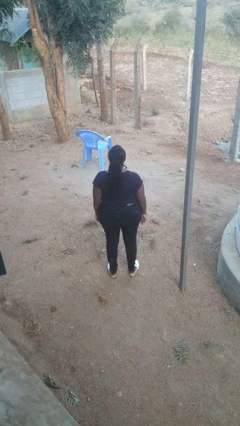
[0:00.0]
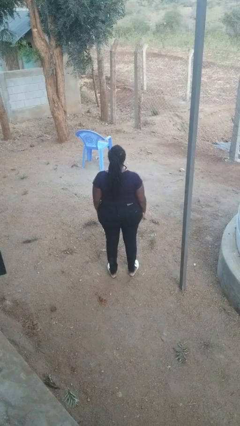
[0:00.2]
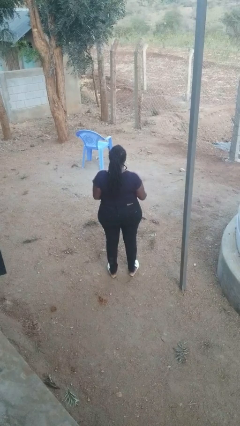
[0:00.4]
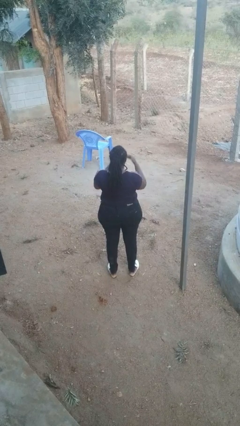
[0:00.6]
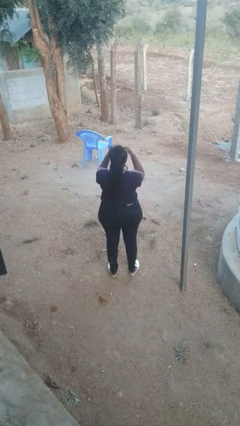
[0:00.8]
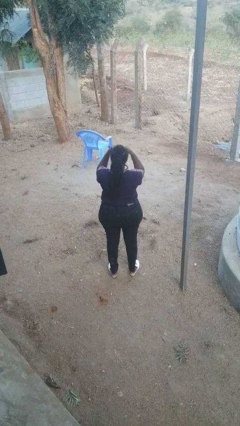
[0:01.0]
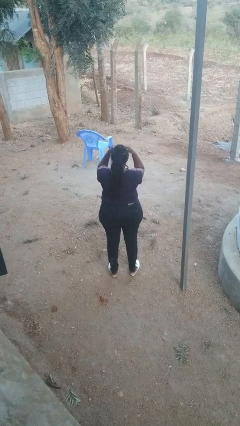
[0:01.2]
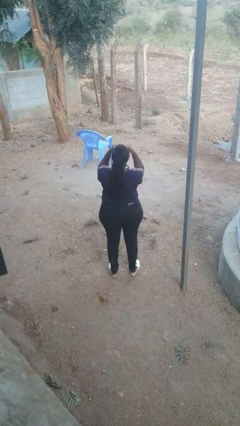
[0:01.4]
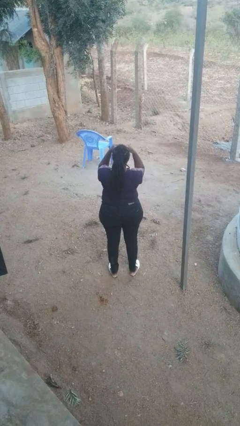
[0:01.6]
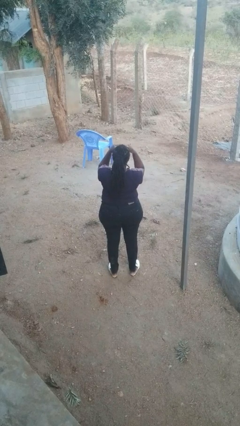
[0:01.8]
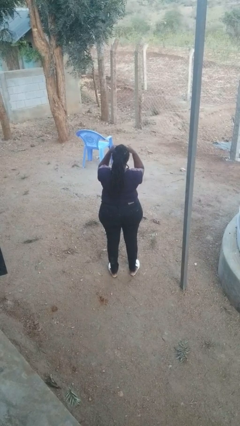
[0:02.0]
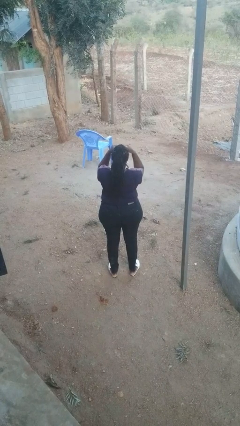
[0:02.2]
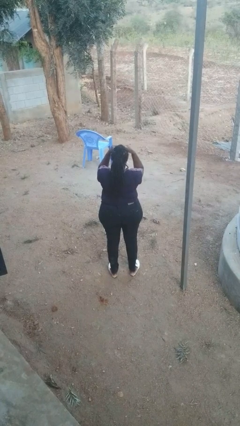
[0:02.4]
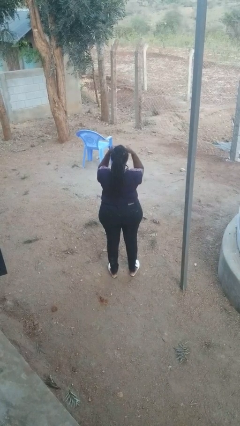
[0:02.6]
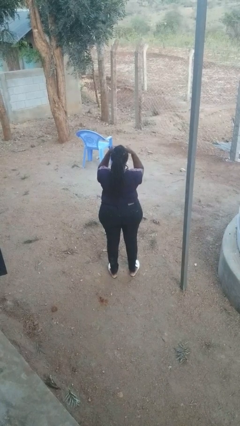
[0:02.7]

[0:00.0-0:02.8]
person shades eyes

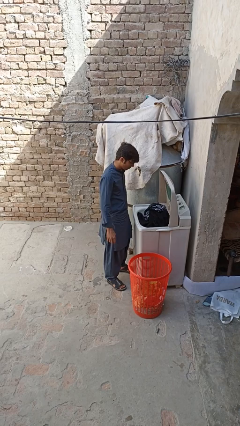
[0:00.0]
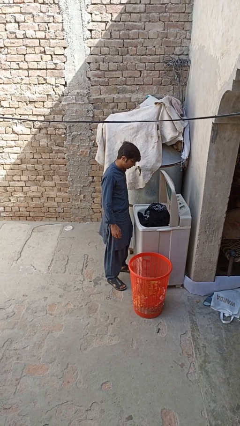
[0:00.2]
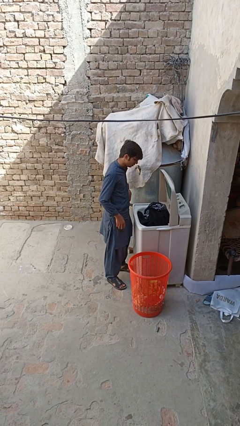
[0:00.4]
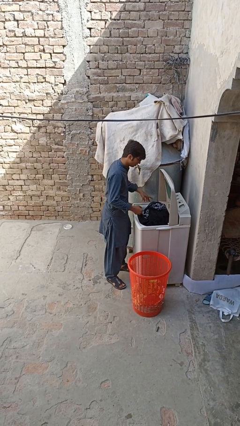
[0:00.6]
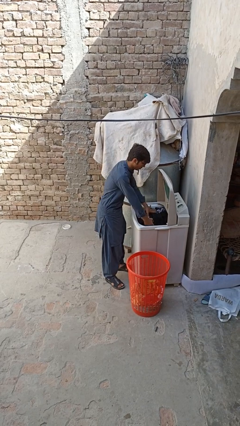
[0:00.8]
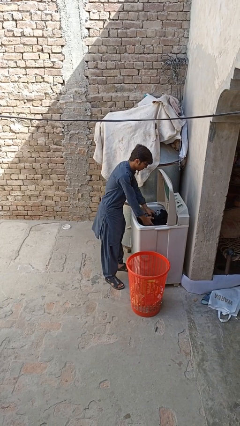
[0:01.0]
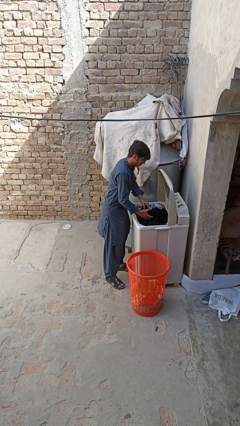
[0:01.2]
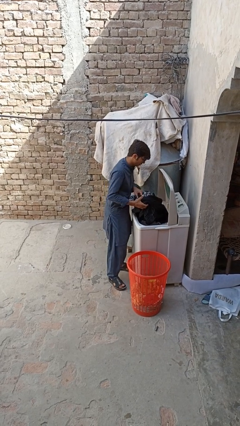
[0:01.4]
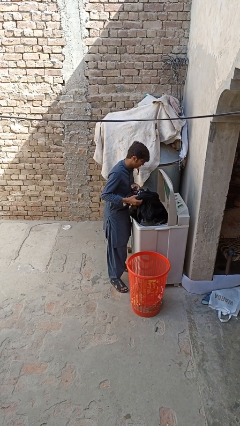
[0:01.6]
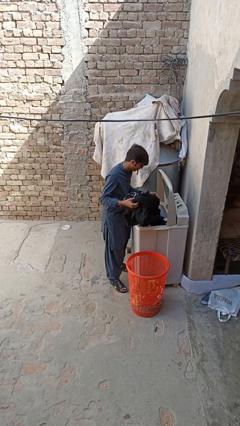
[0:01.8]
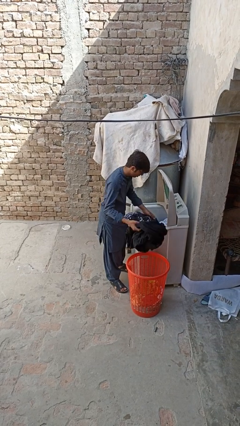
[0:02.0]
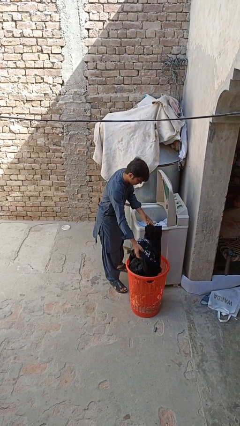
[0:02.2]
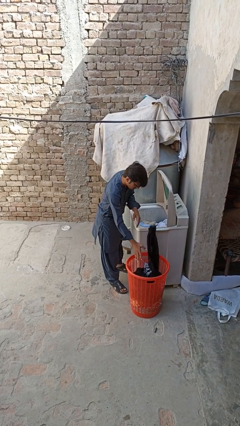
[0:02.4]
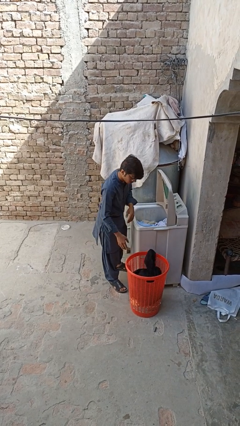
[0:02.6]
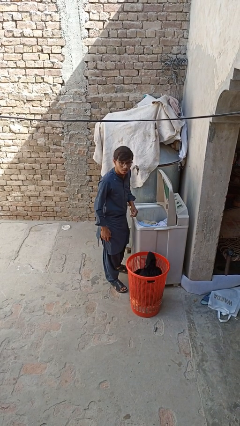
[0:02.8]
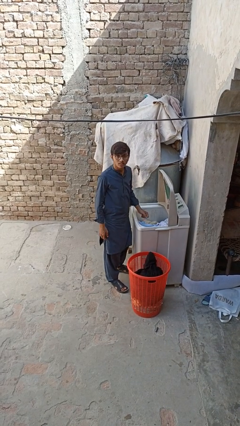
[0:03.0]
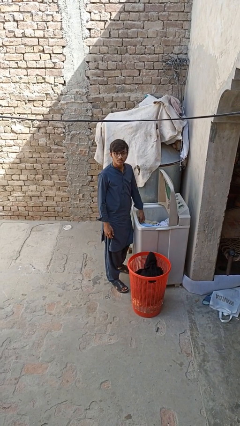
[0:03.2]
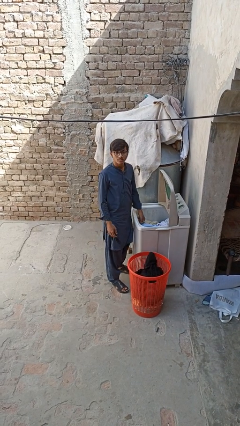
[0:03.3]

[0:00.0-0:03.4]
person unloads clotheswasher

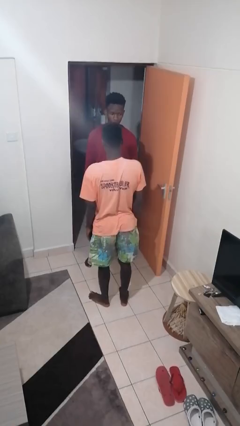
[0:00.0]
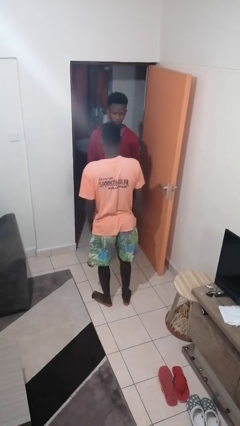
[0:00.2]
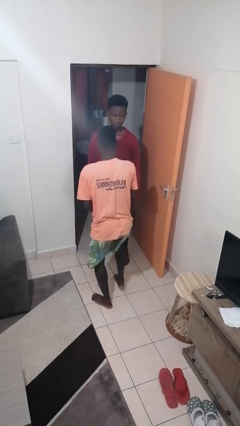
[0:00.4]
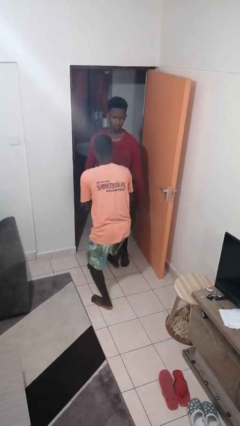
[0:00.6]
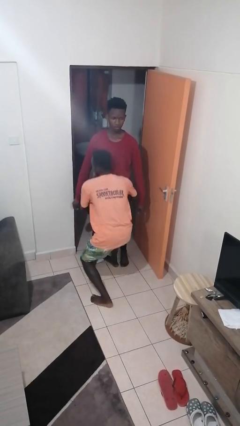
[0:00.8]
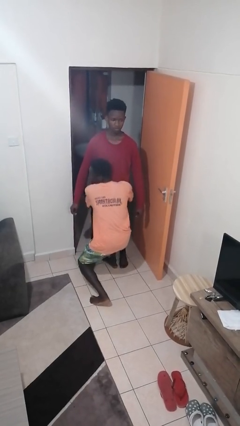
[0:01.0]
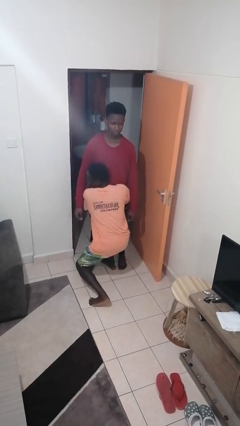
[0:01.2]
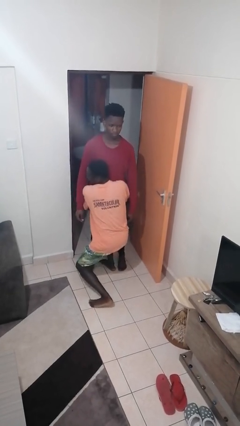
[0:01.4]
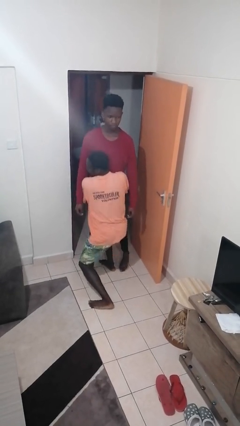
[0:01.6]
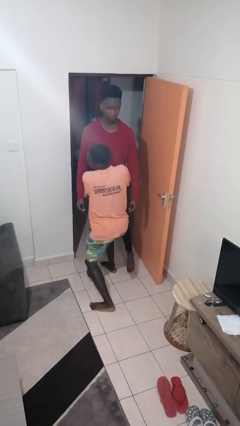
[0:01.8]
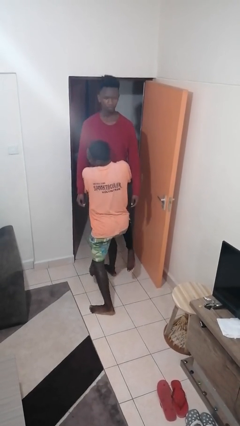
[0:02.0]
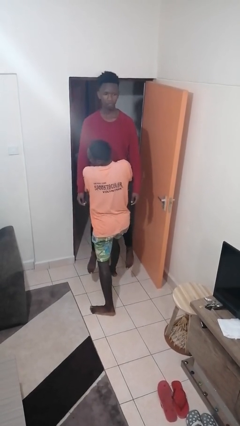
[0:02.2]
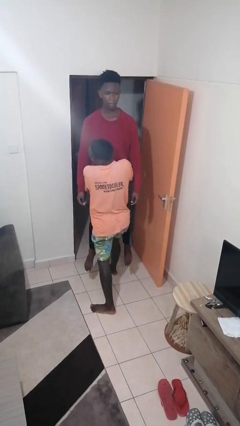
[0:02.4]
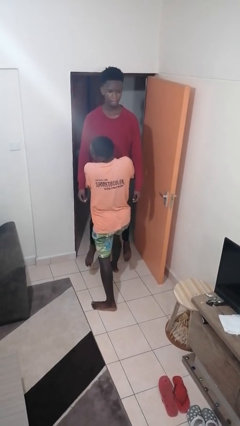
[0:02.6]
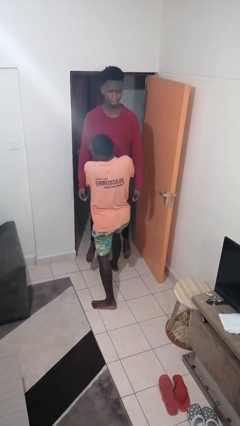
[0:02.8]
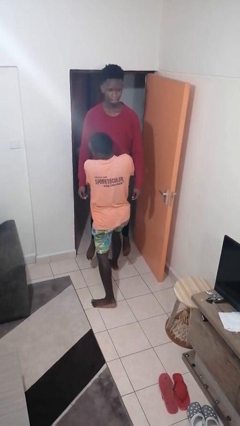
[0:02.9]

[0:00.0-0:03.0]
person picks up person

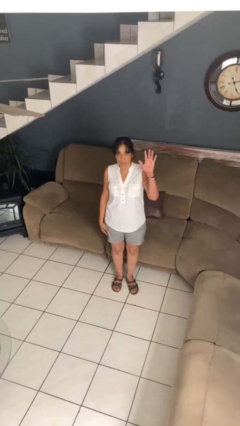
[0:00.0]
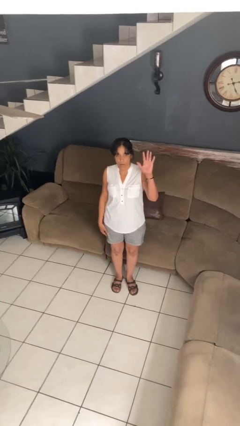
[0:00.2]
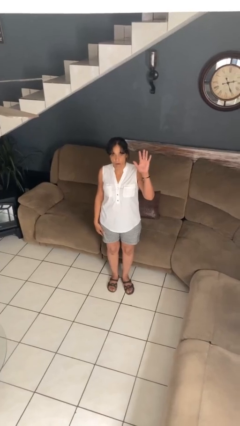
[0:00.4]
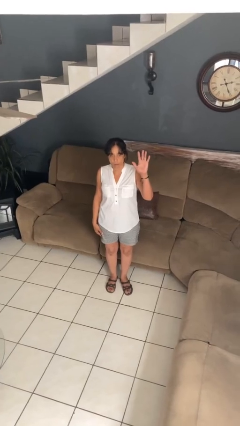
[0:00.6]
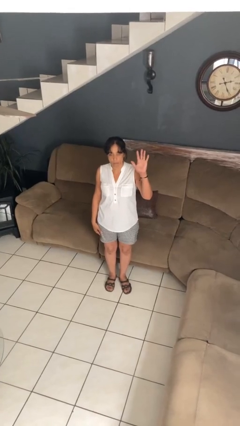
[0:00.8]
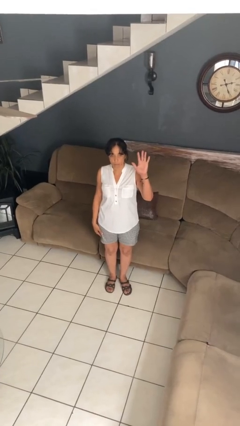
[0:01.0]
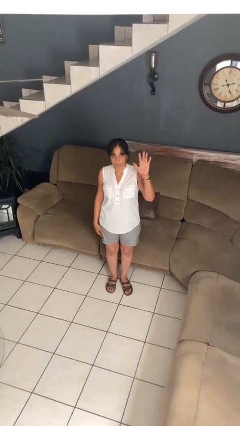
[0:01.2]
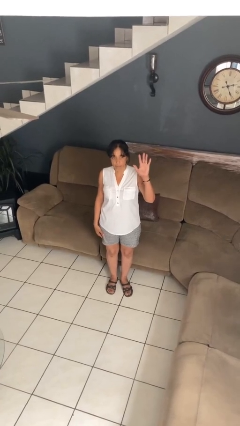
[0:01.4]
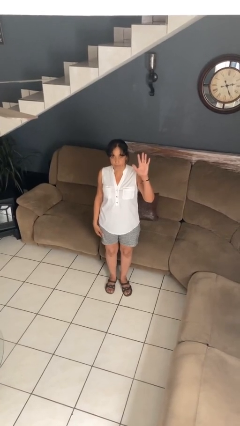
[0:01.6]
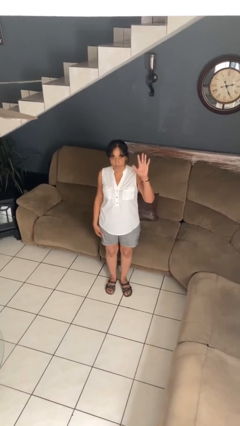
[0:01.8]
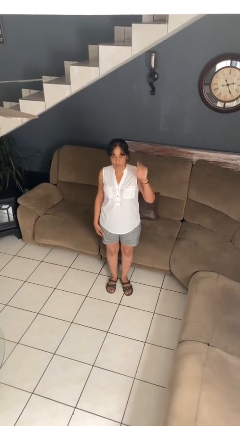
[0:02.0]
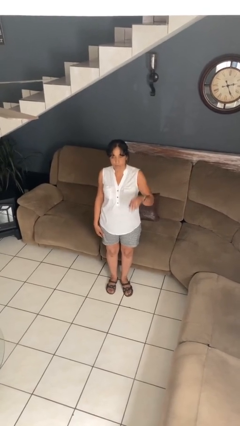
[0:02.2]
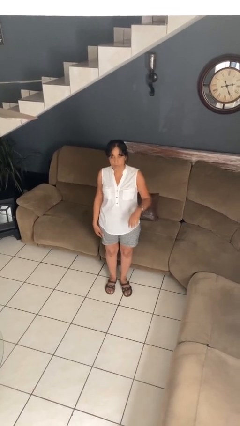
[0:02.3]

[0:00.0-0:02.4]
person gestures number five

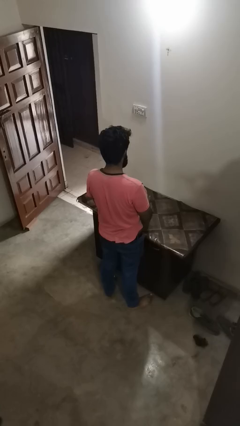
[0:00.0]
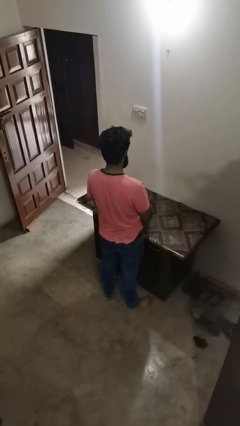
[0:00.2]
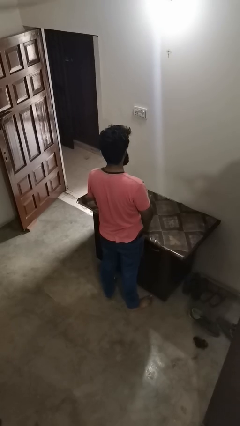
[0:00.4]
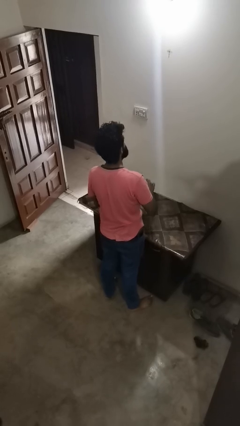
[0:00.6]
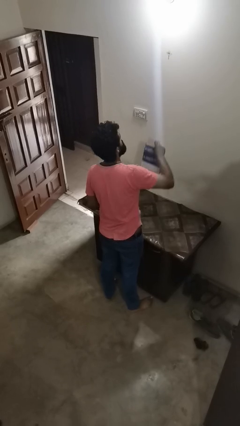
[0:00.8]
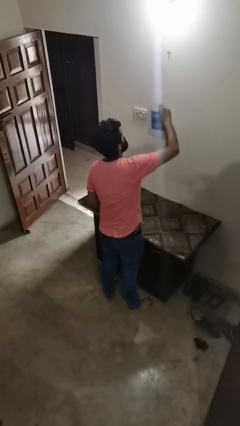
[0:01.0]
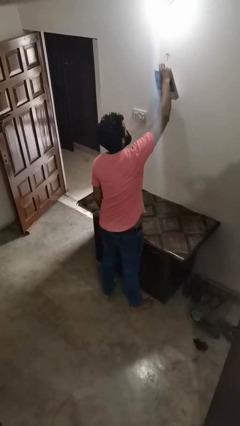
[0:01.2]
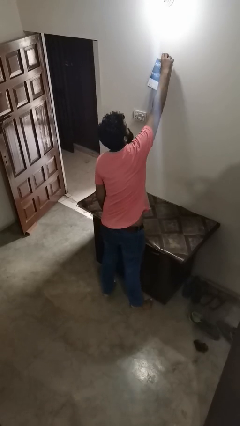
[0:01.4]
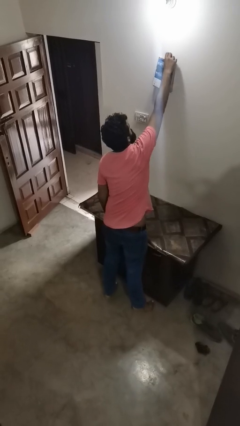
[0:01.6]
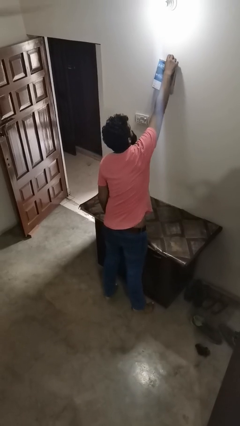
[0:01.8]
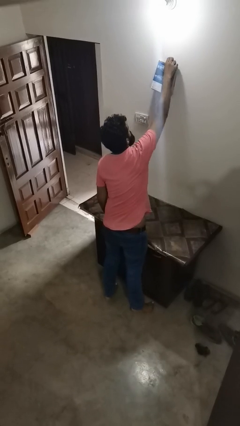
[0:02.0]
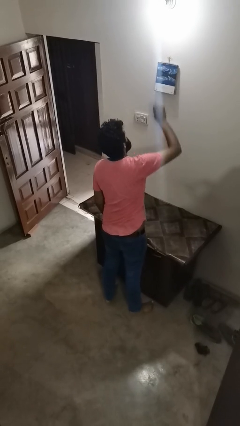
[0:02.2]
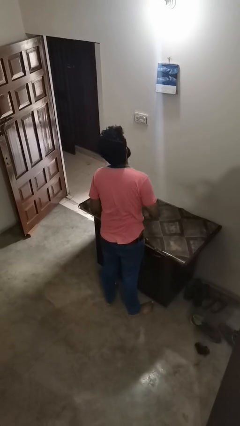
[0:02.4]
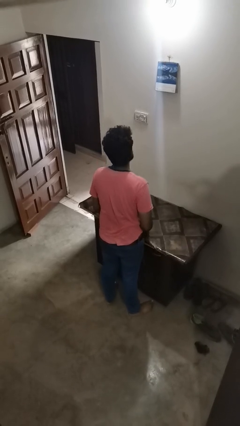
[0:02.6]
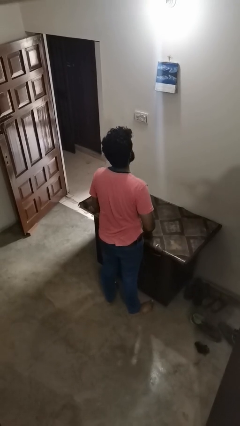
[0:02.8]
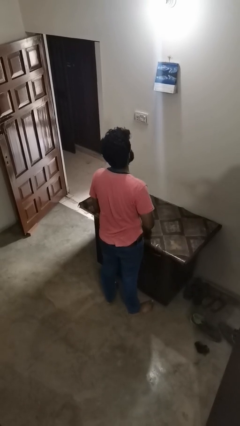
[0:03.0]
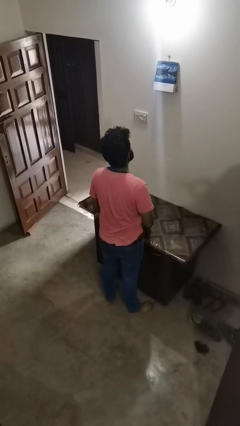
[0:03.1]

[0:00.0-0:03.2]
person puts up picture frame

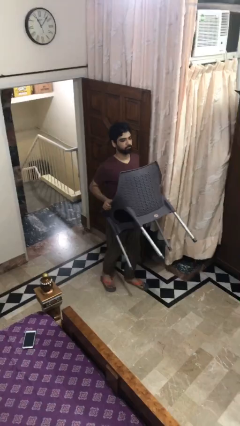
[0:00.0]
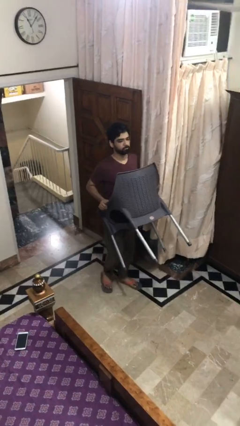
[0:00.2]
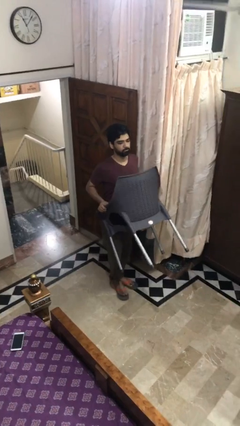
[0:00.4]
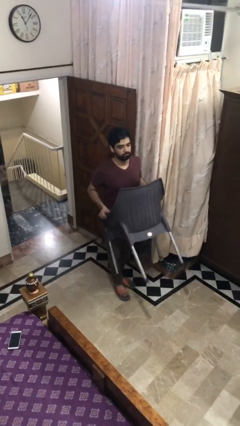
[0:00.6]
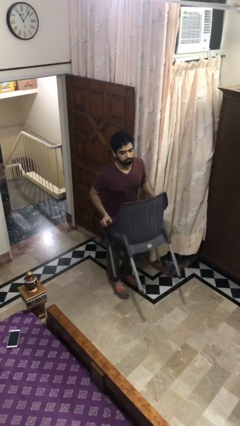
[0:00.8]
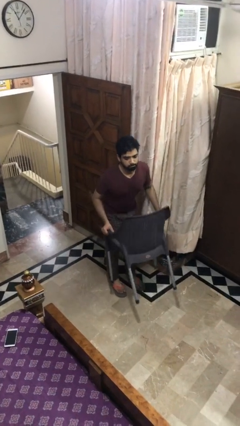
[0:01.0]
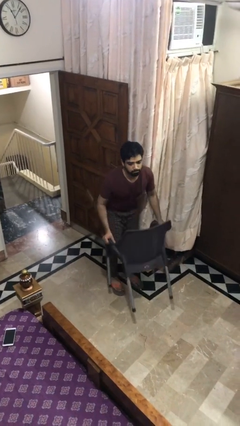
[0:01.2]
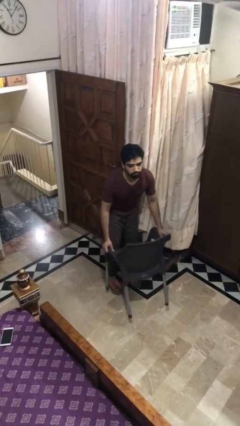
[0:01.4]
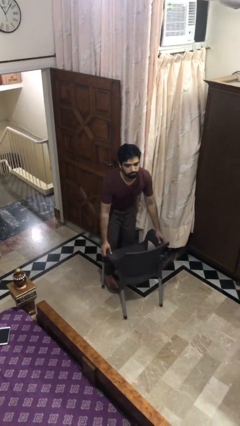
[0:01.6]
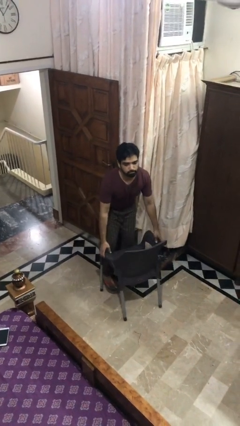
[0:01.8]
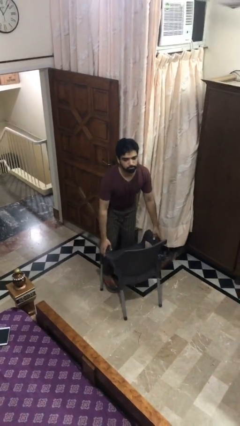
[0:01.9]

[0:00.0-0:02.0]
person puts down object on floor

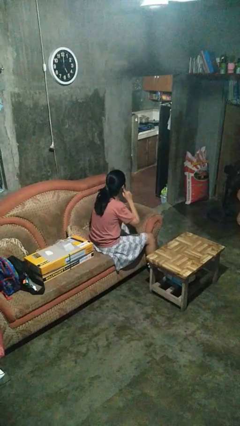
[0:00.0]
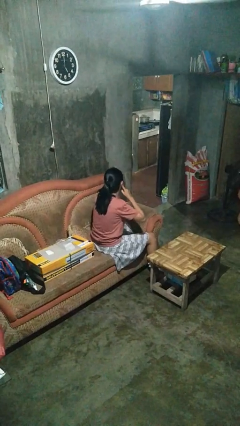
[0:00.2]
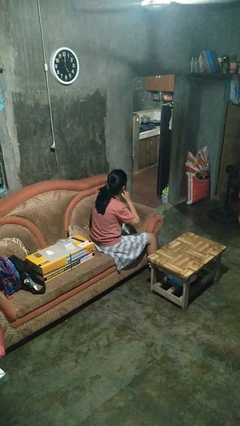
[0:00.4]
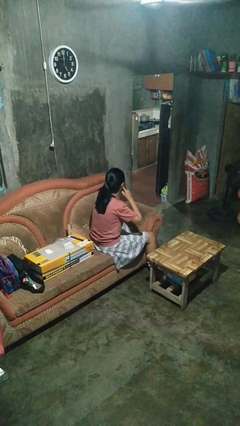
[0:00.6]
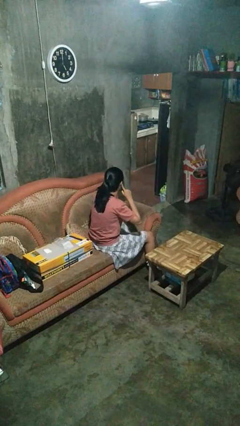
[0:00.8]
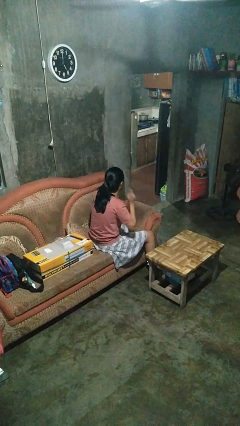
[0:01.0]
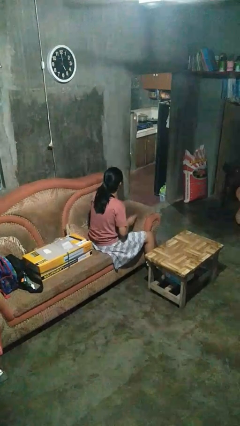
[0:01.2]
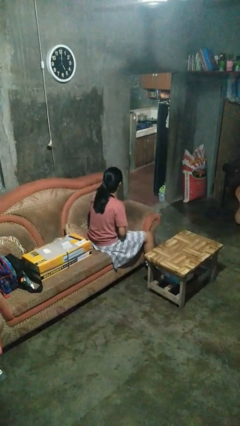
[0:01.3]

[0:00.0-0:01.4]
person puts fingers in ear
